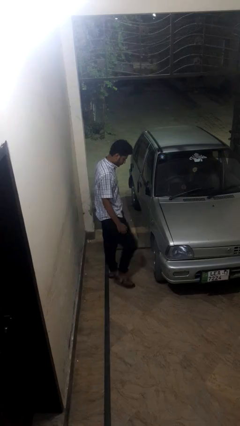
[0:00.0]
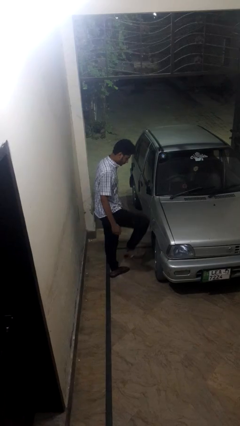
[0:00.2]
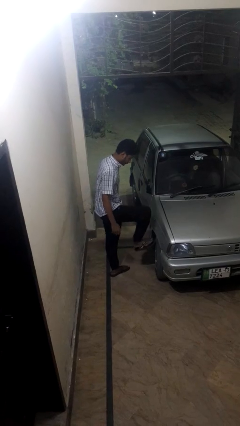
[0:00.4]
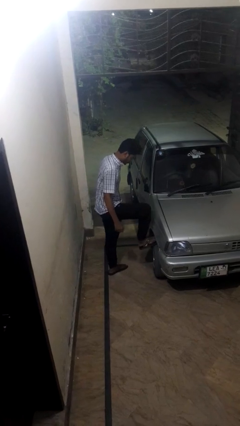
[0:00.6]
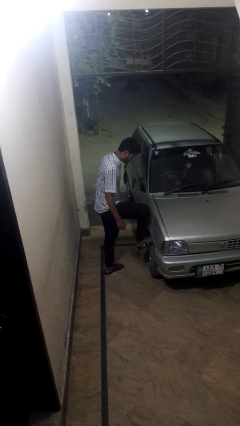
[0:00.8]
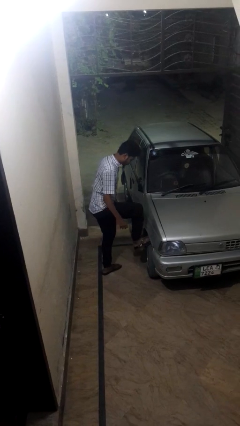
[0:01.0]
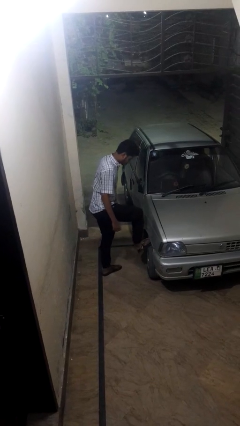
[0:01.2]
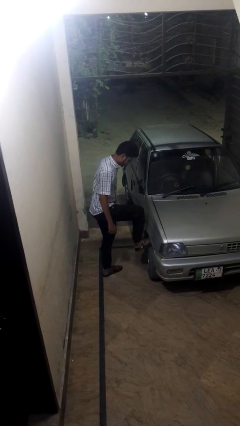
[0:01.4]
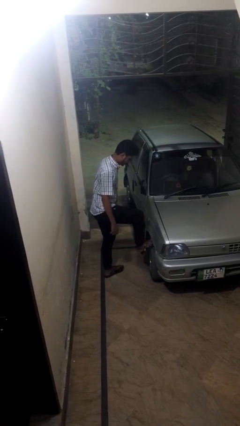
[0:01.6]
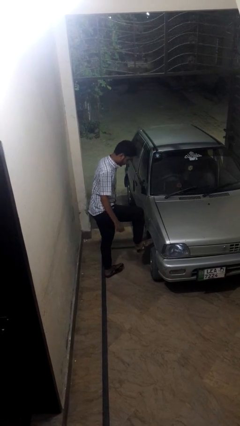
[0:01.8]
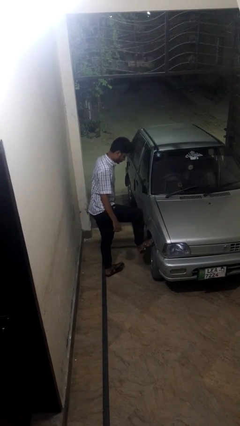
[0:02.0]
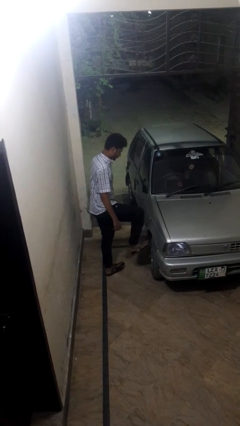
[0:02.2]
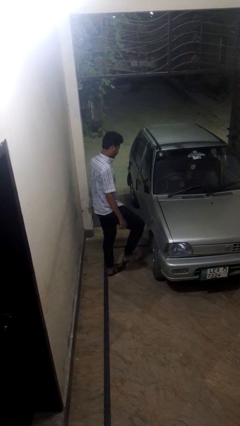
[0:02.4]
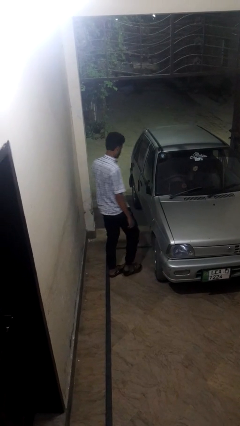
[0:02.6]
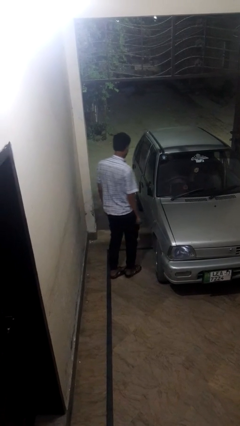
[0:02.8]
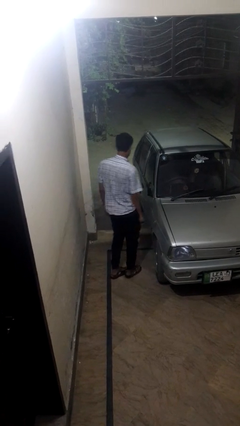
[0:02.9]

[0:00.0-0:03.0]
person kicks car tires

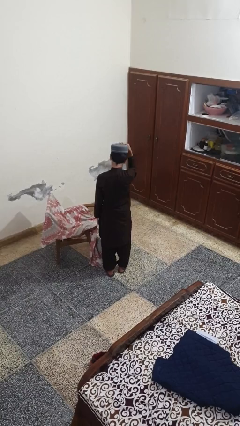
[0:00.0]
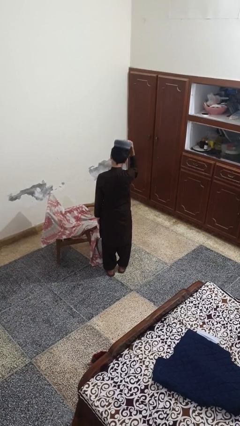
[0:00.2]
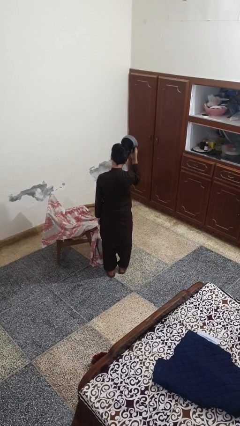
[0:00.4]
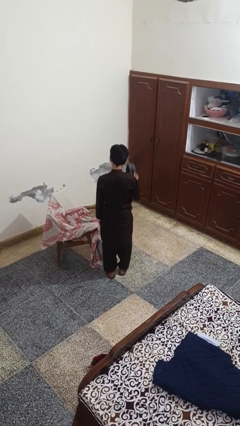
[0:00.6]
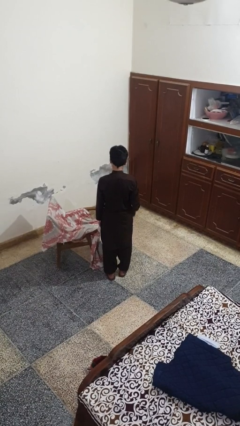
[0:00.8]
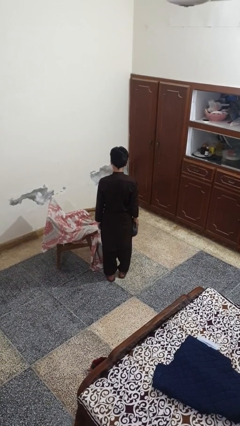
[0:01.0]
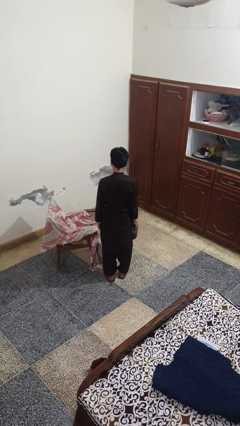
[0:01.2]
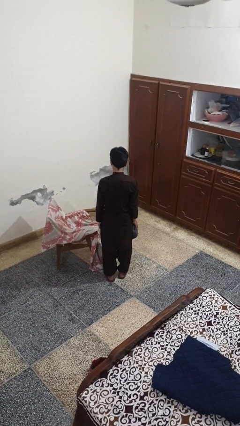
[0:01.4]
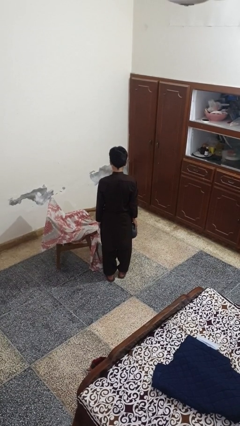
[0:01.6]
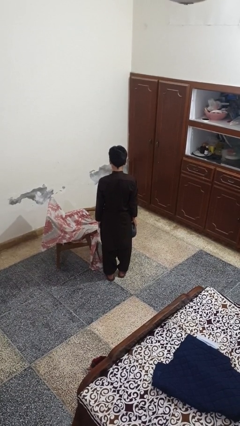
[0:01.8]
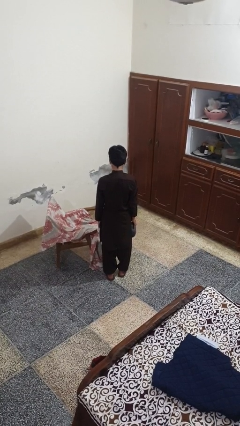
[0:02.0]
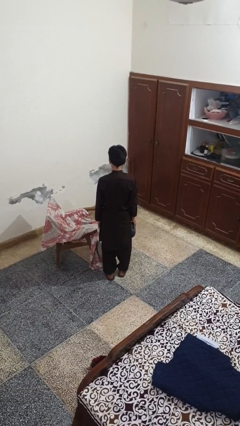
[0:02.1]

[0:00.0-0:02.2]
person takes off hat

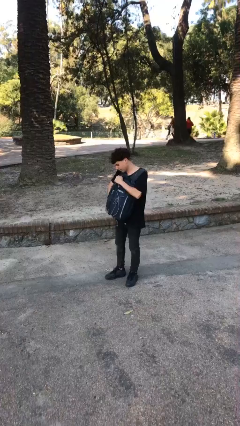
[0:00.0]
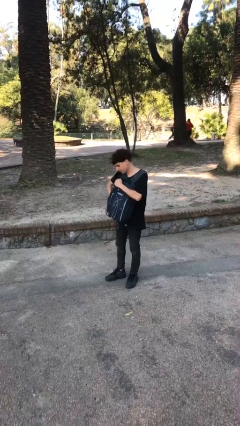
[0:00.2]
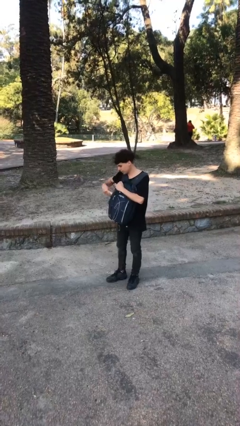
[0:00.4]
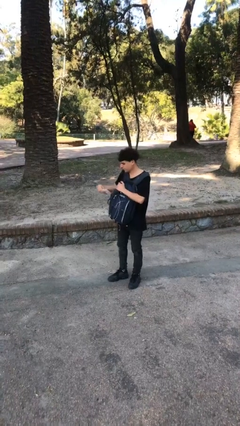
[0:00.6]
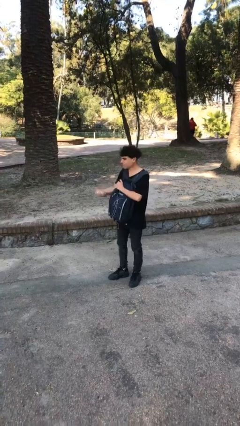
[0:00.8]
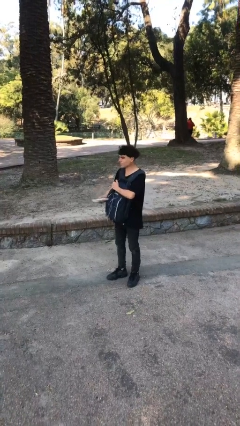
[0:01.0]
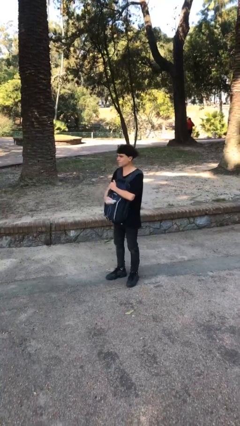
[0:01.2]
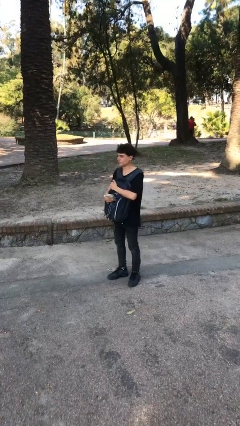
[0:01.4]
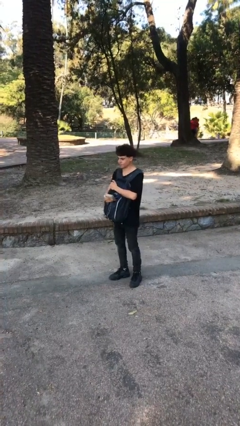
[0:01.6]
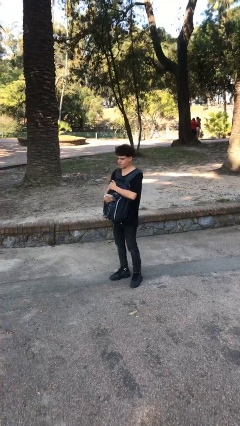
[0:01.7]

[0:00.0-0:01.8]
person takes object from backpack

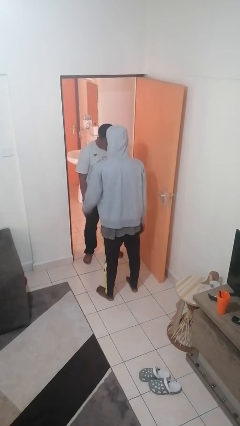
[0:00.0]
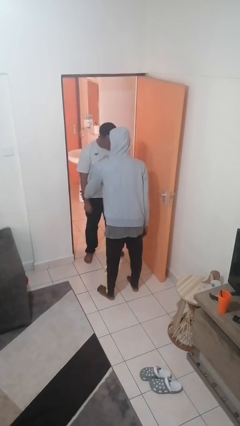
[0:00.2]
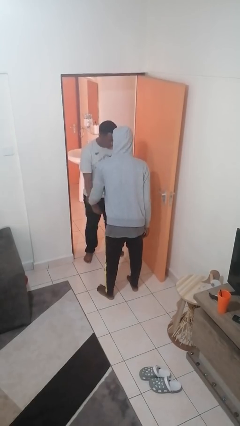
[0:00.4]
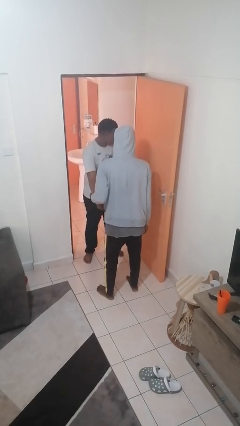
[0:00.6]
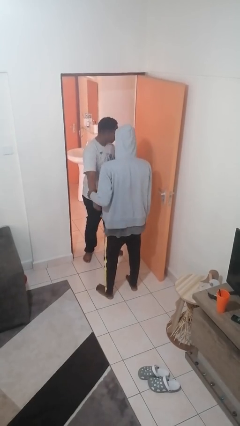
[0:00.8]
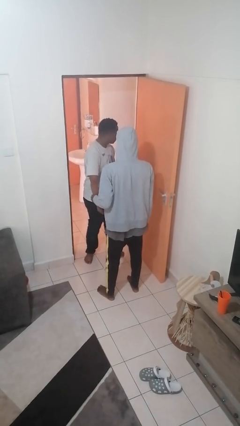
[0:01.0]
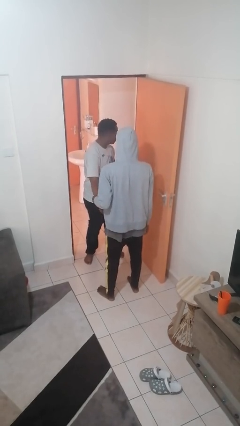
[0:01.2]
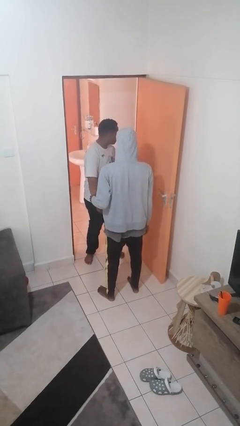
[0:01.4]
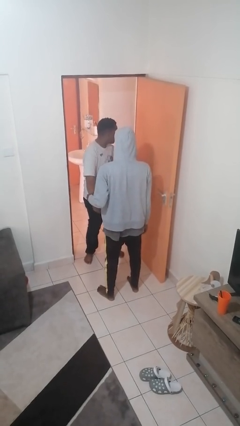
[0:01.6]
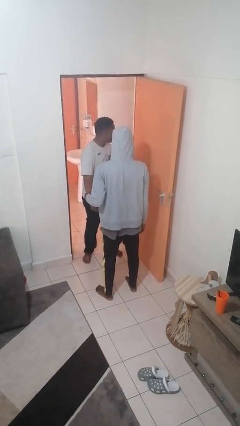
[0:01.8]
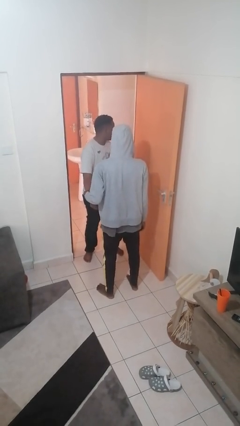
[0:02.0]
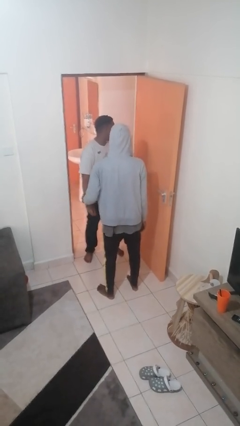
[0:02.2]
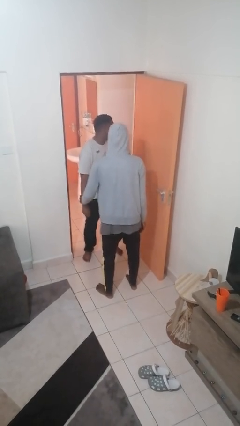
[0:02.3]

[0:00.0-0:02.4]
person grabs person by forearm

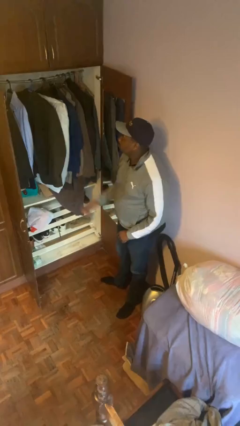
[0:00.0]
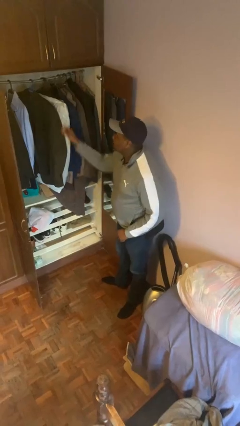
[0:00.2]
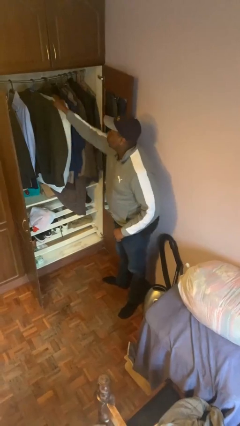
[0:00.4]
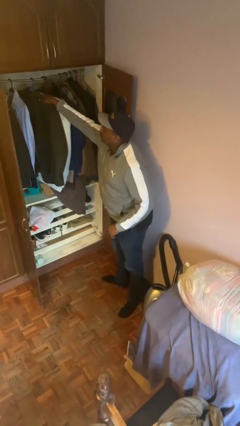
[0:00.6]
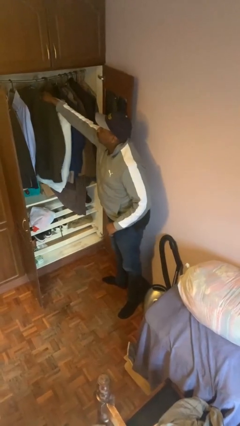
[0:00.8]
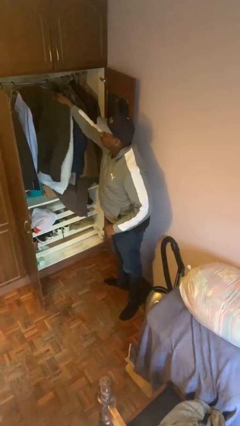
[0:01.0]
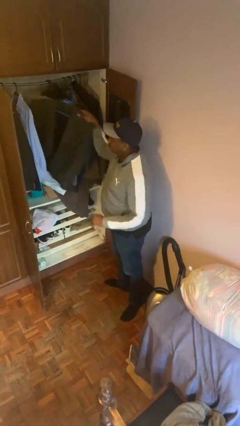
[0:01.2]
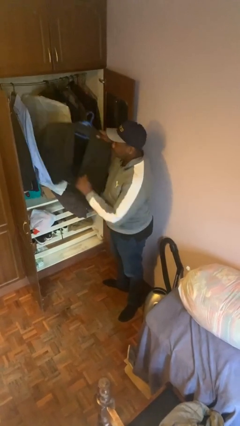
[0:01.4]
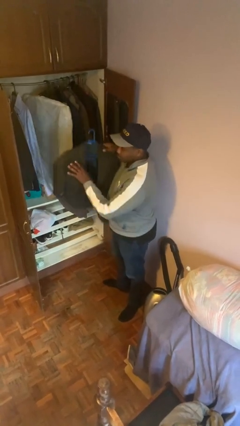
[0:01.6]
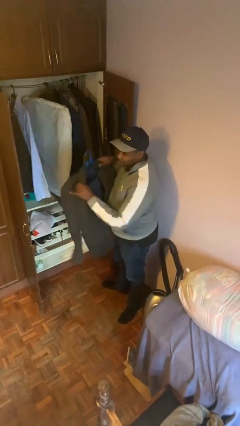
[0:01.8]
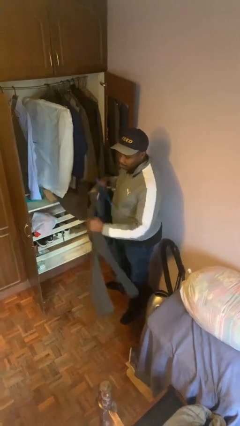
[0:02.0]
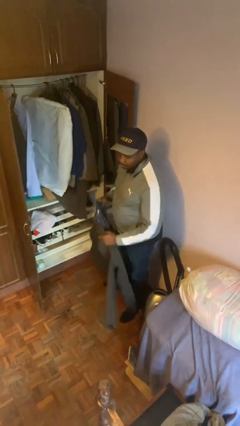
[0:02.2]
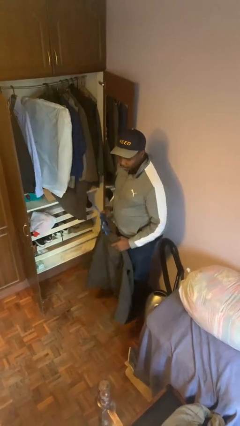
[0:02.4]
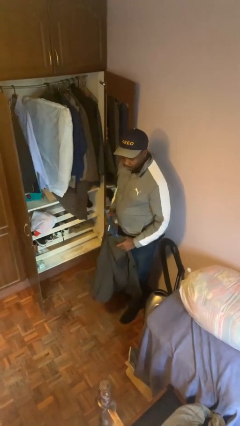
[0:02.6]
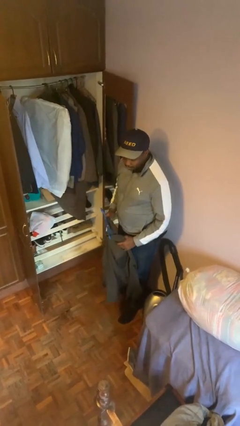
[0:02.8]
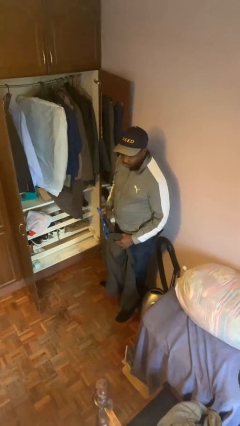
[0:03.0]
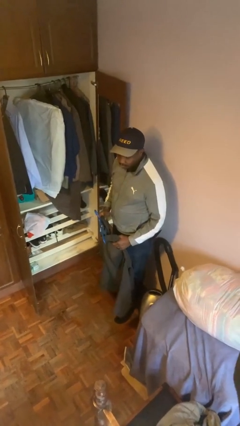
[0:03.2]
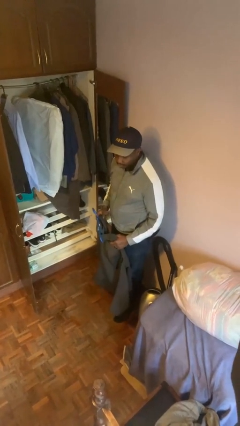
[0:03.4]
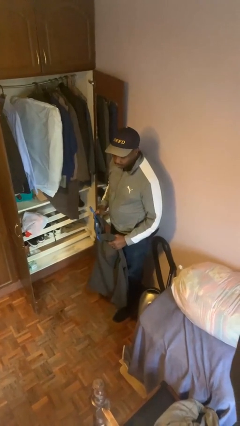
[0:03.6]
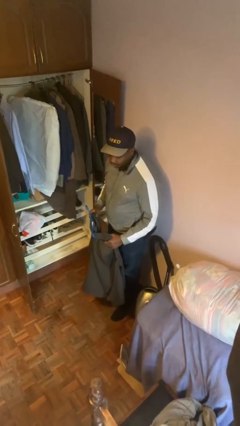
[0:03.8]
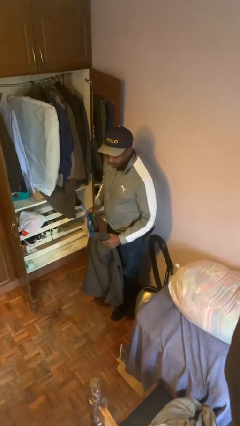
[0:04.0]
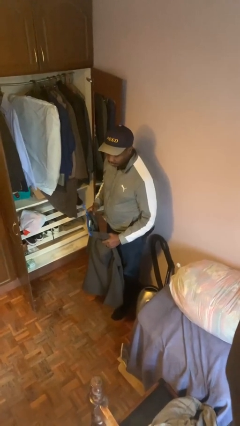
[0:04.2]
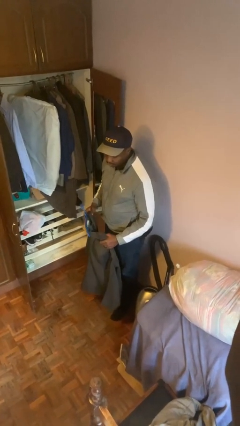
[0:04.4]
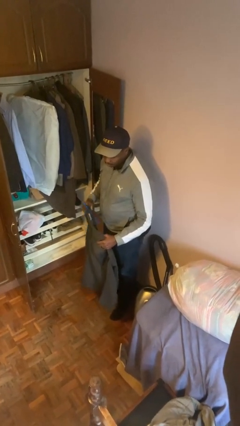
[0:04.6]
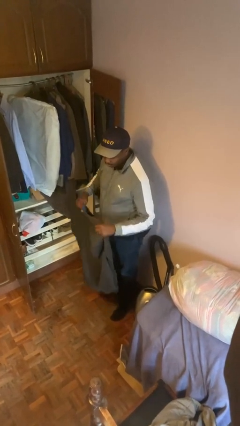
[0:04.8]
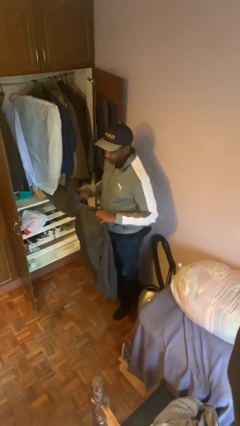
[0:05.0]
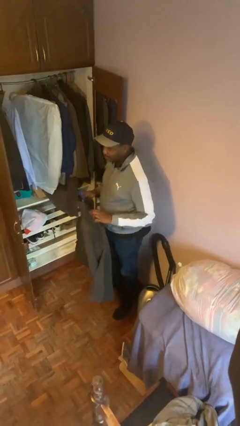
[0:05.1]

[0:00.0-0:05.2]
person takes clothes from closet

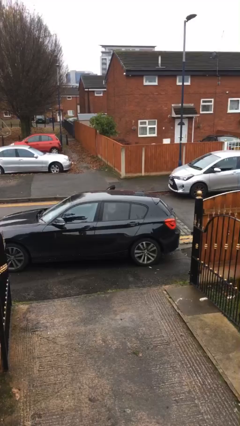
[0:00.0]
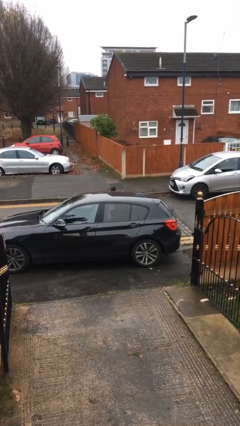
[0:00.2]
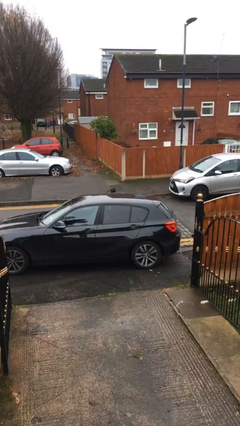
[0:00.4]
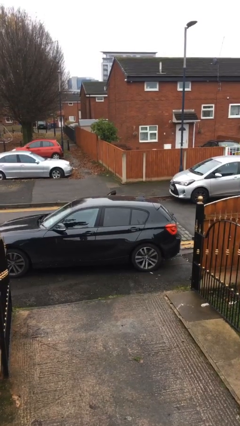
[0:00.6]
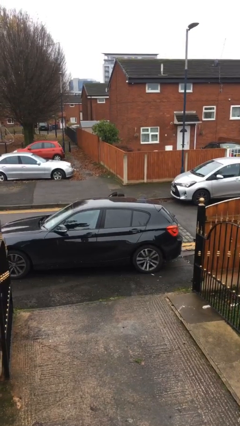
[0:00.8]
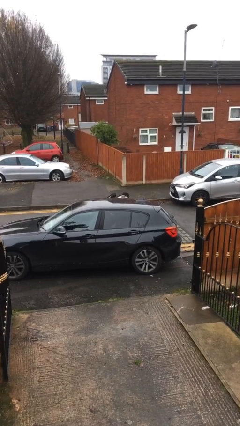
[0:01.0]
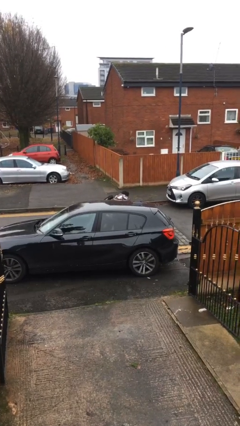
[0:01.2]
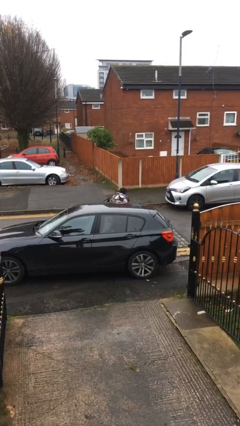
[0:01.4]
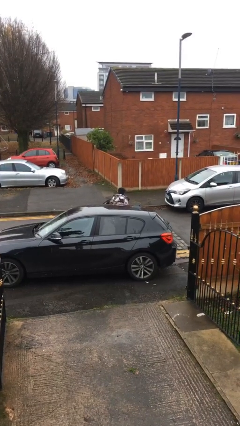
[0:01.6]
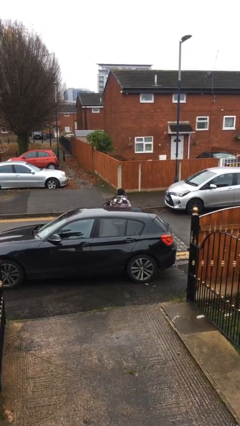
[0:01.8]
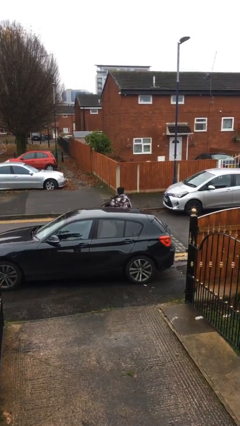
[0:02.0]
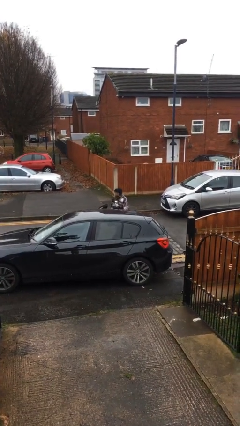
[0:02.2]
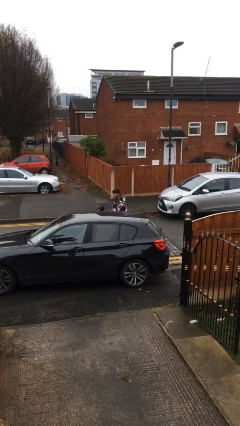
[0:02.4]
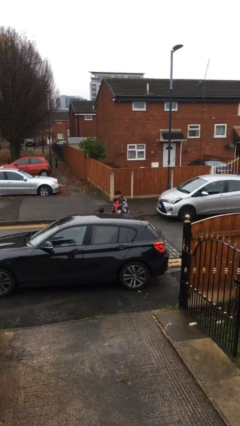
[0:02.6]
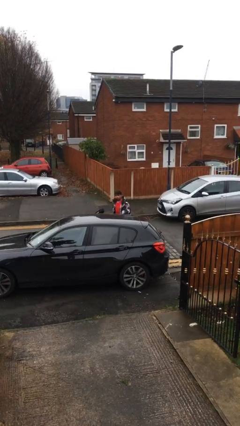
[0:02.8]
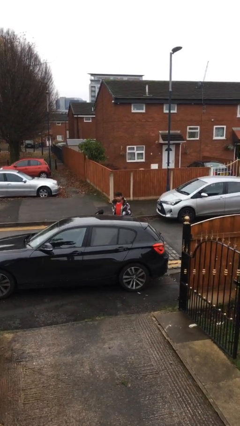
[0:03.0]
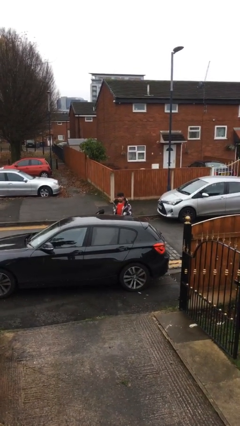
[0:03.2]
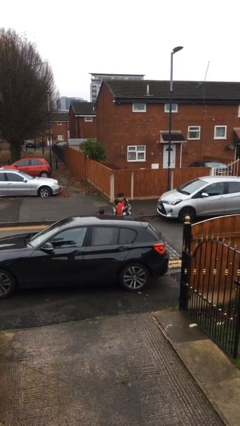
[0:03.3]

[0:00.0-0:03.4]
person exits car
